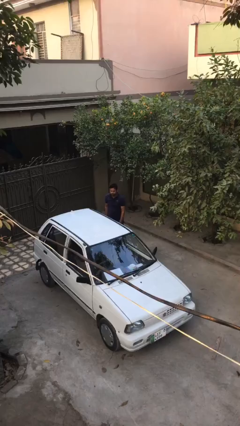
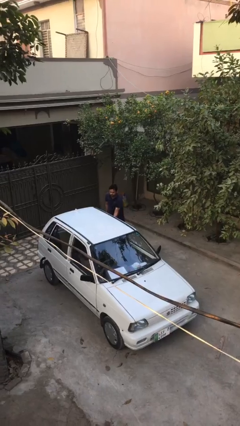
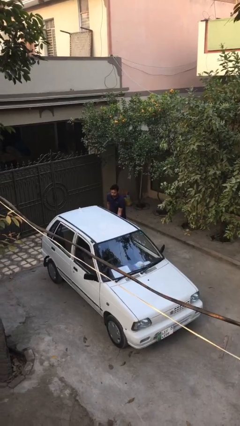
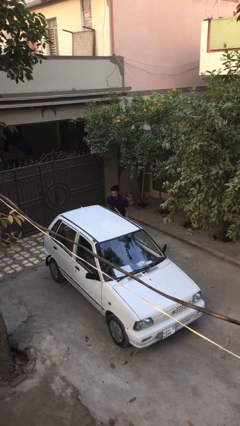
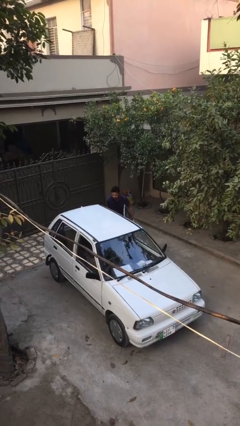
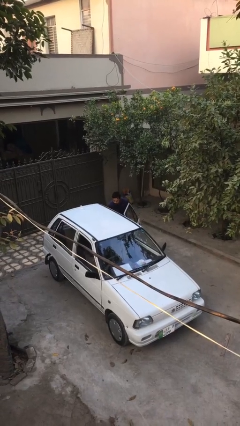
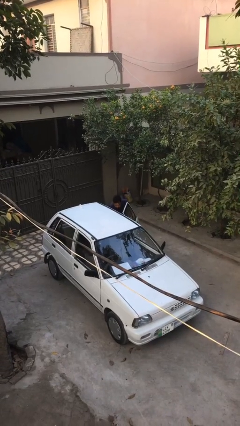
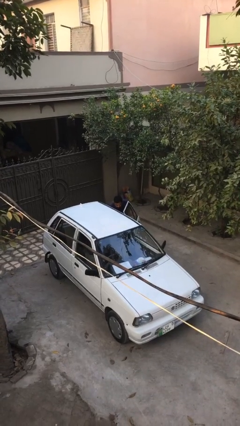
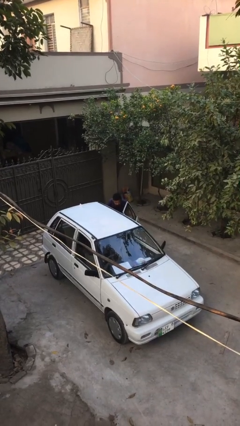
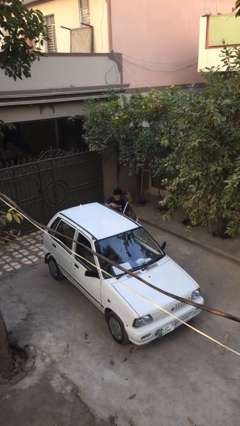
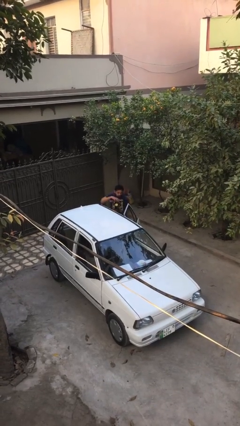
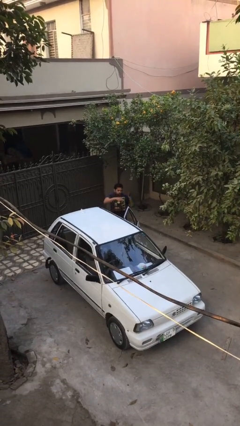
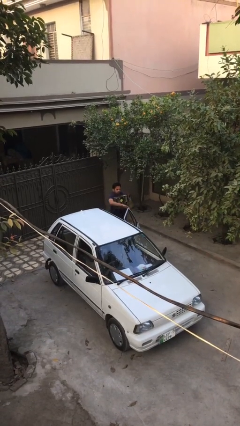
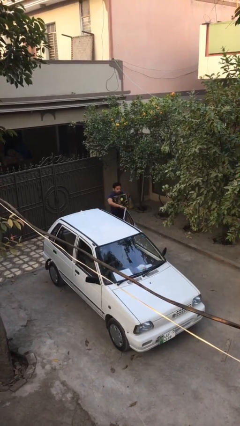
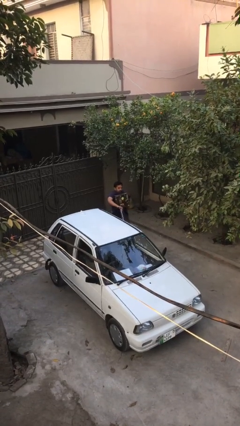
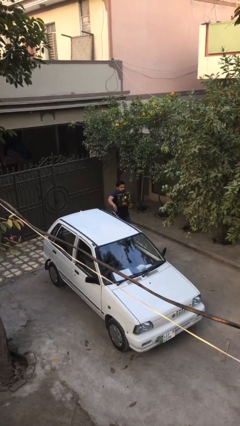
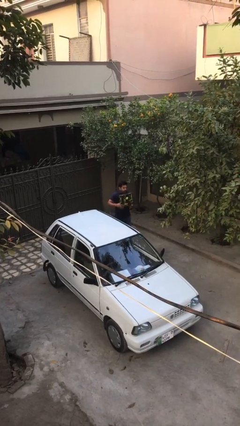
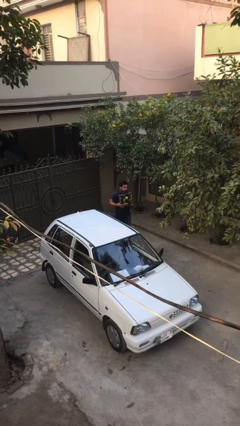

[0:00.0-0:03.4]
person unloads car

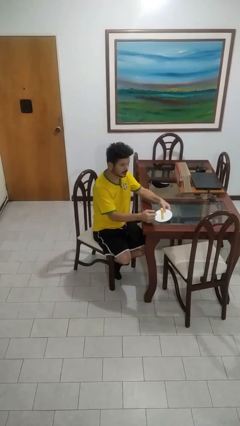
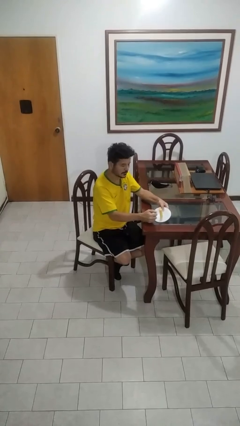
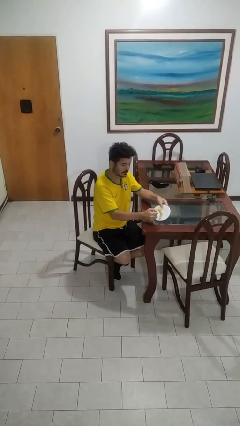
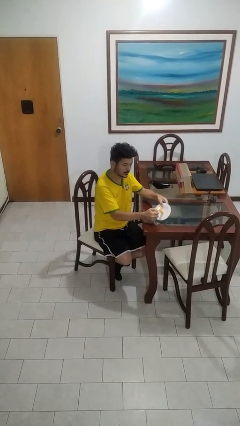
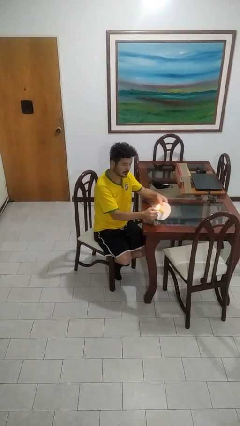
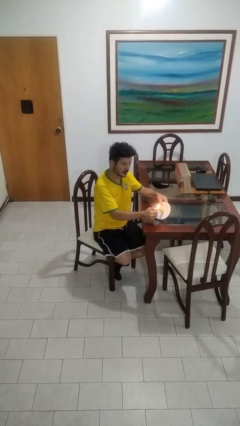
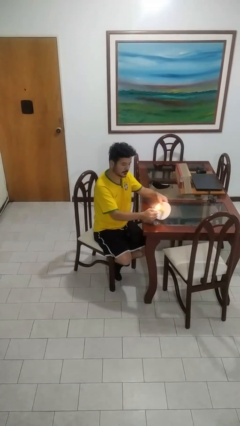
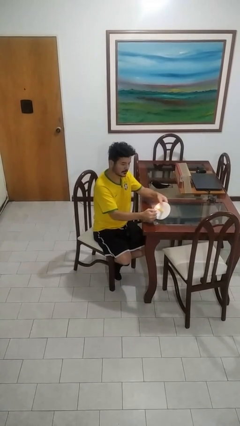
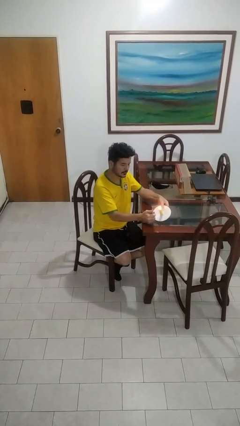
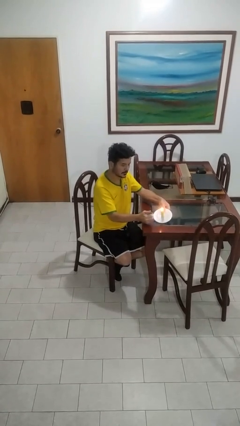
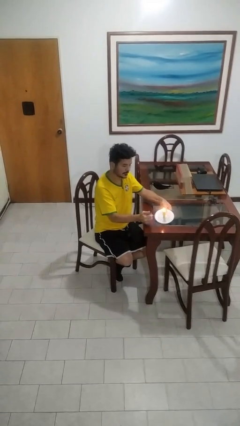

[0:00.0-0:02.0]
person lights candle

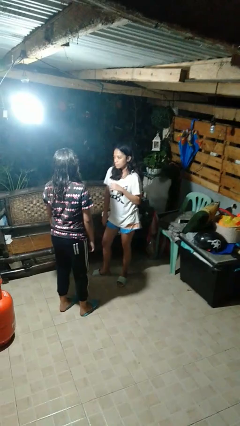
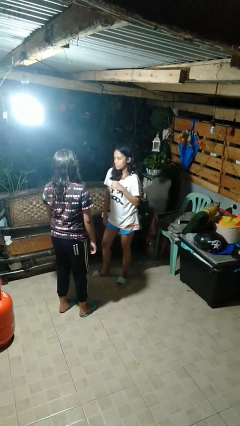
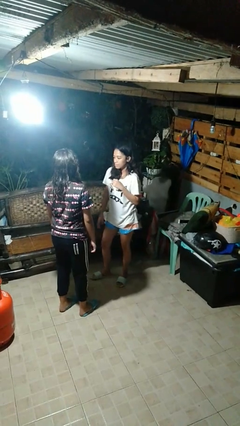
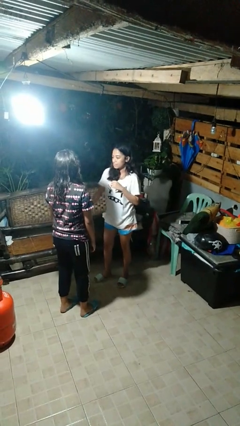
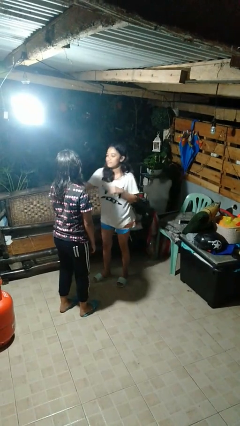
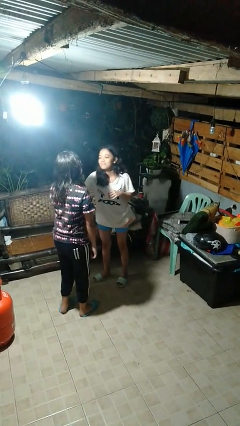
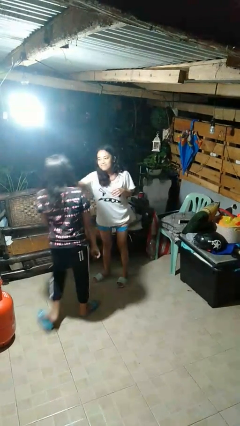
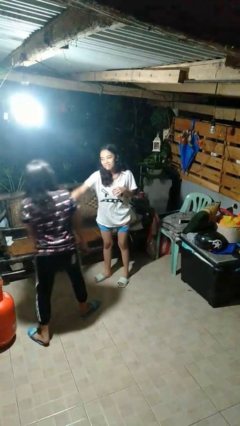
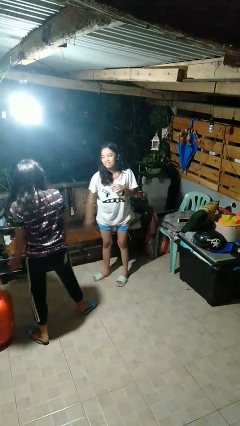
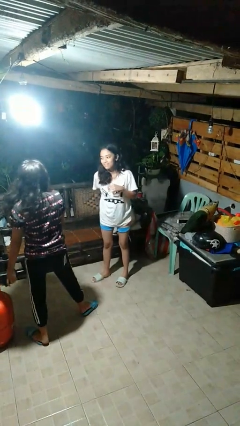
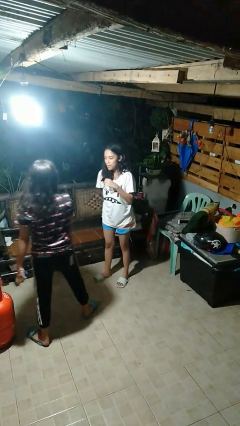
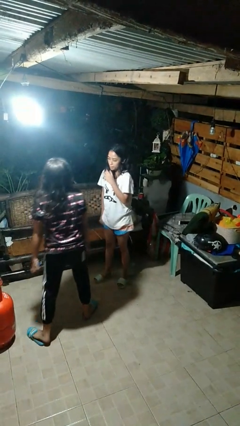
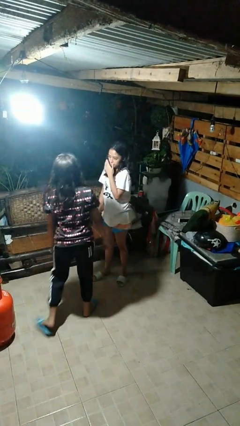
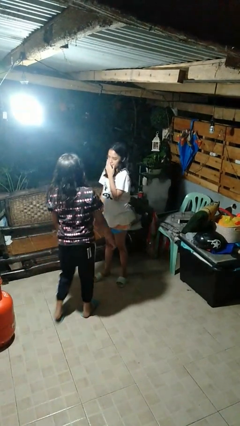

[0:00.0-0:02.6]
person shoves person

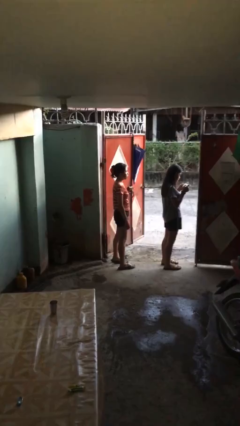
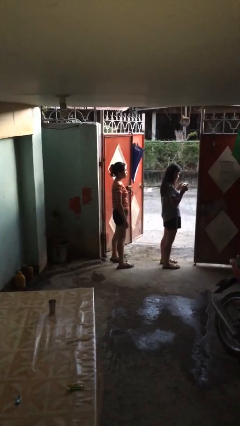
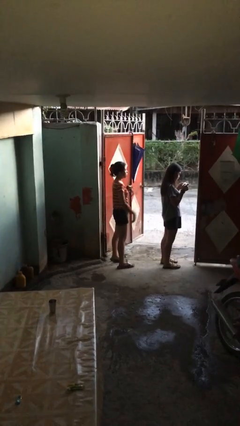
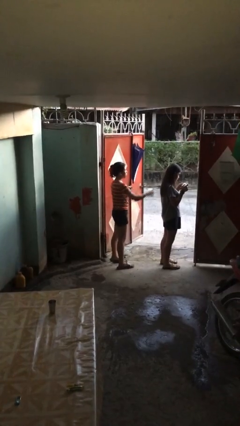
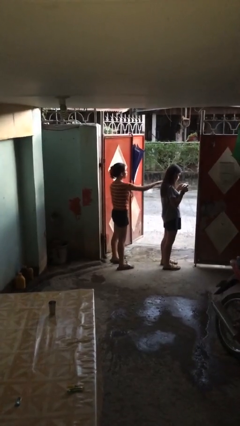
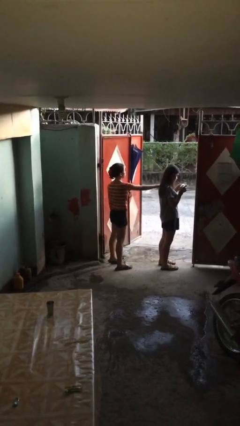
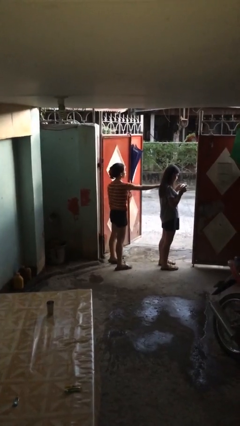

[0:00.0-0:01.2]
person grabs person by shoulder

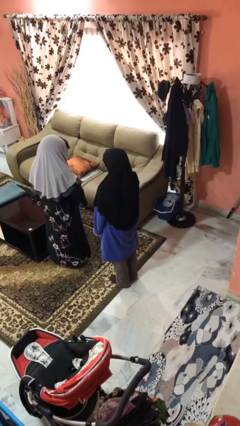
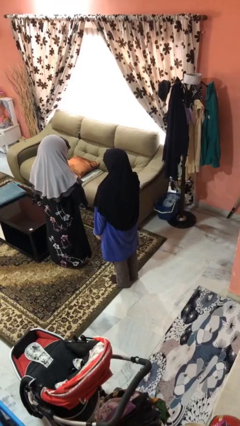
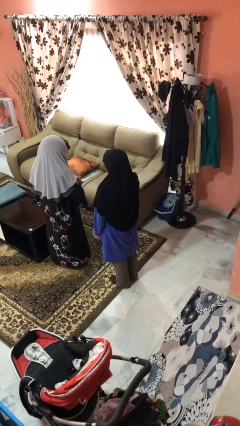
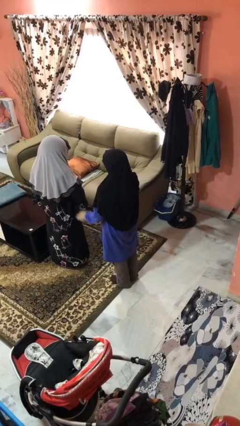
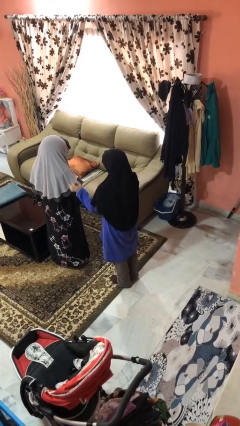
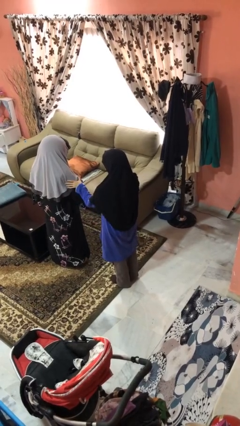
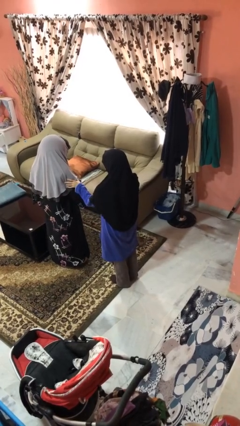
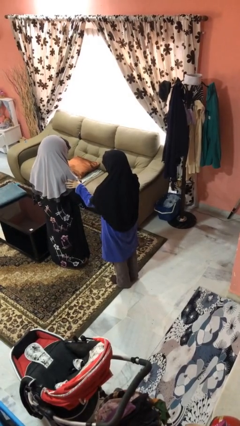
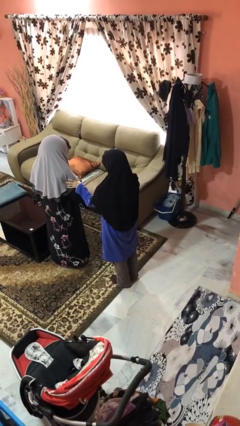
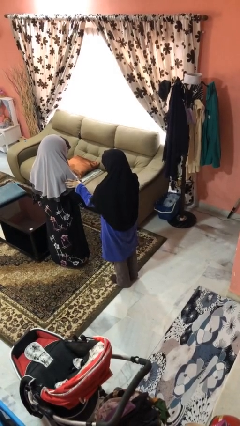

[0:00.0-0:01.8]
person grabs person by bicep

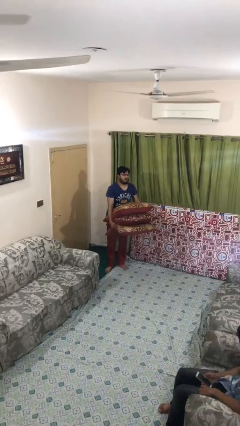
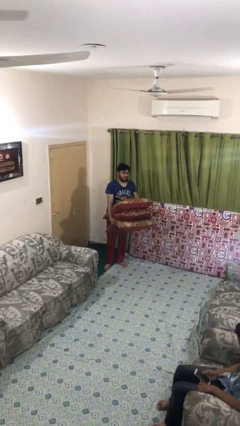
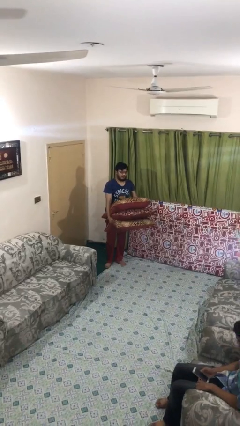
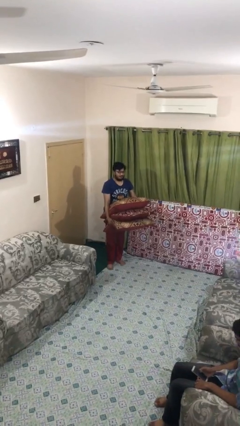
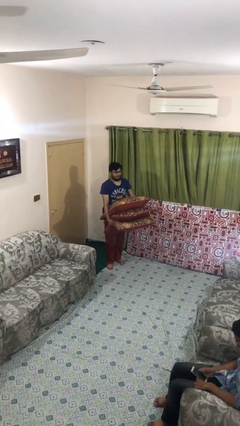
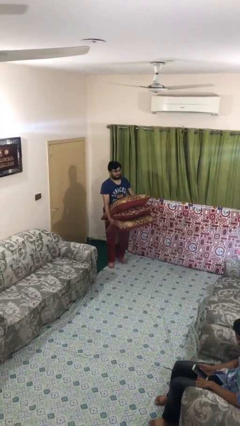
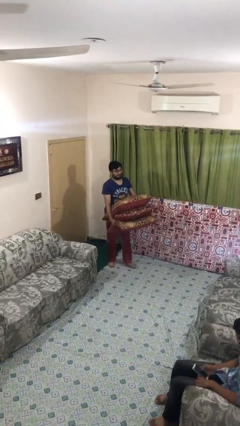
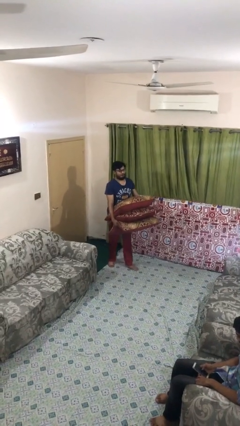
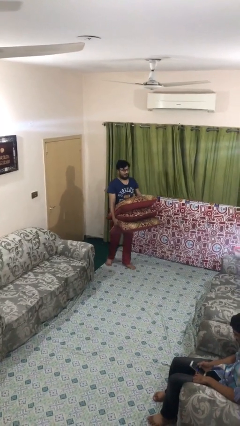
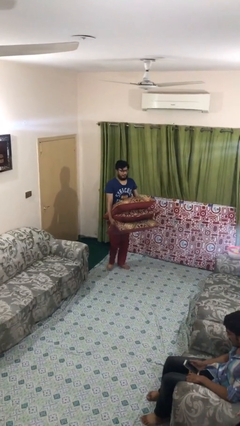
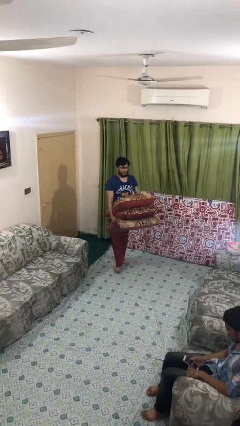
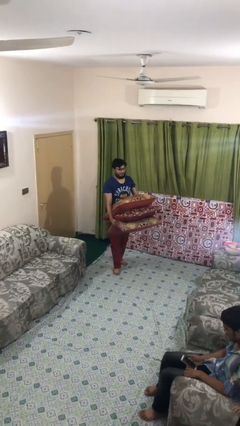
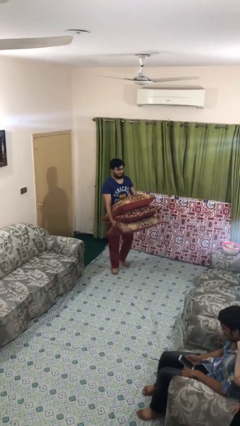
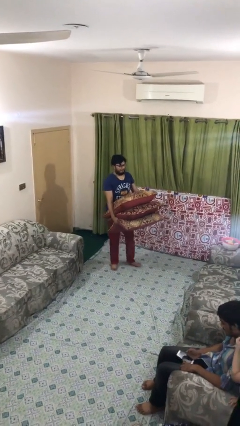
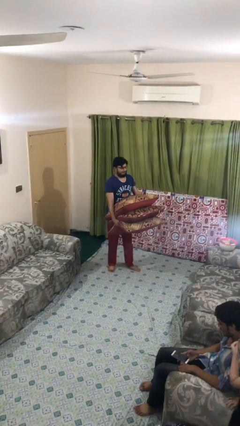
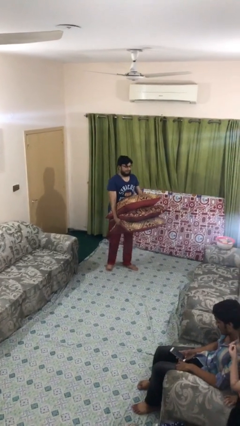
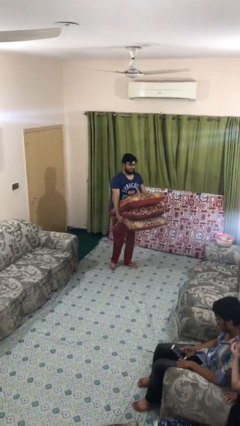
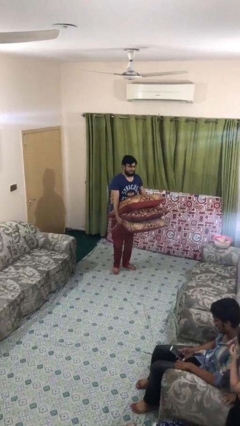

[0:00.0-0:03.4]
person carries heavy object

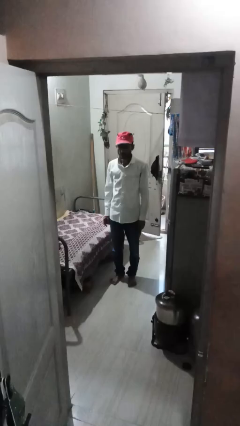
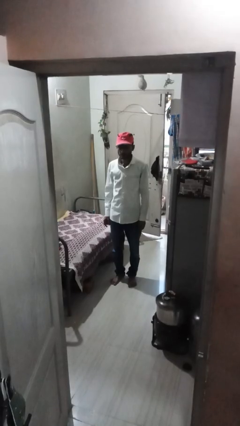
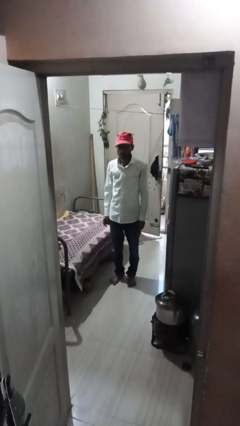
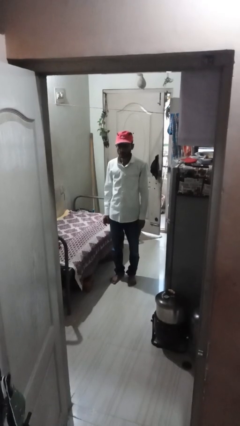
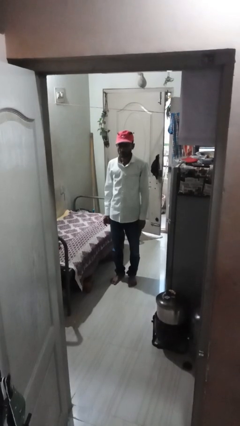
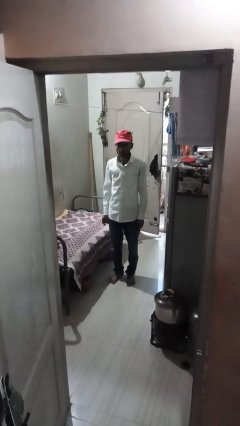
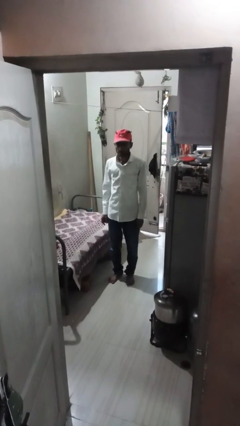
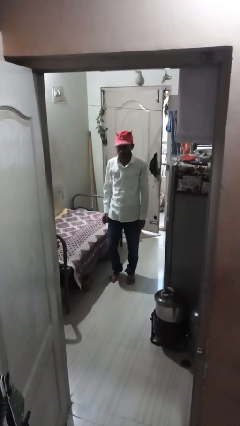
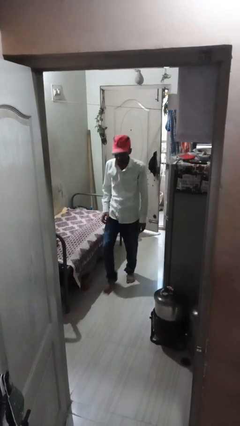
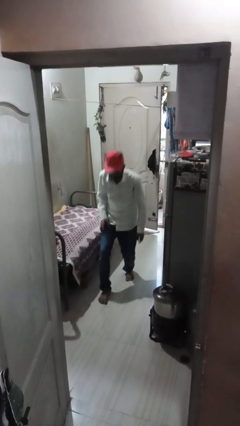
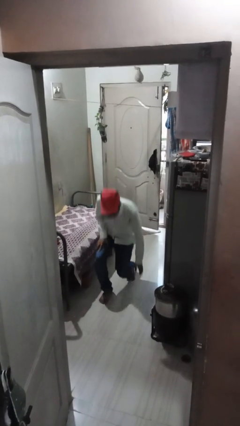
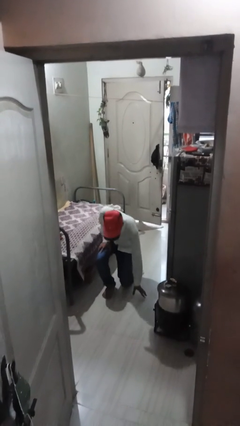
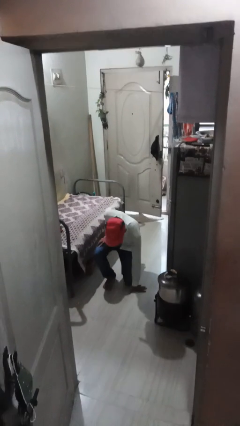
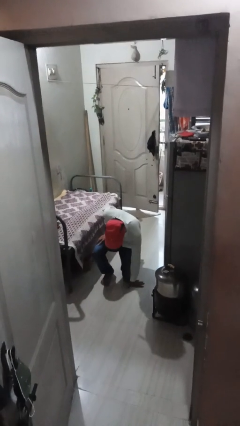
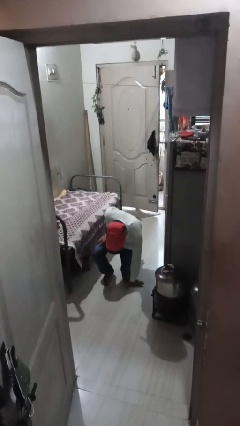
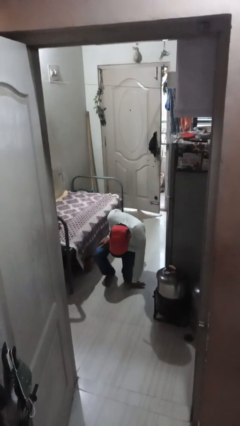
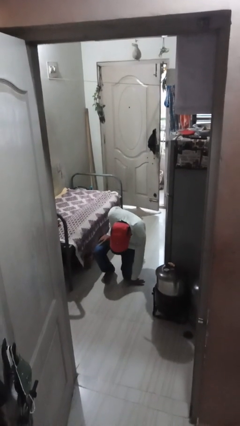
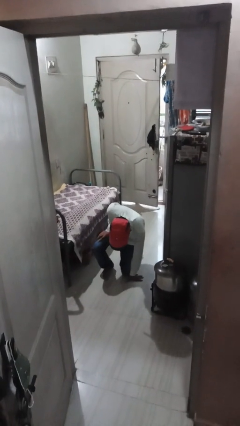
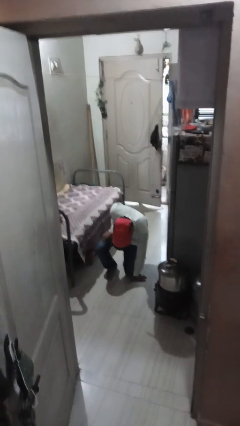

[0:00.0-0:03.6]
person kneels
